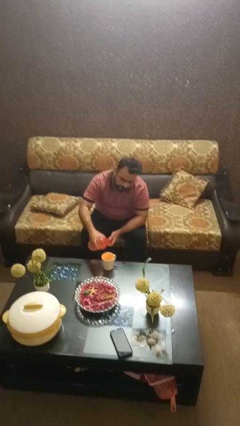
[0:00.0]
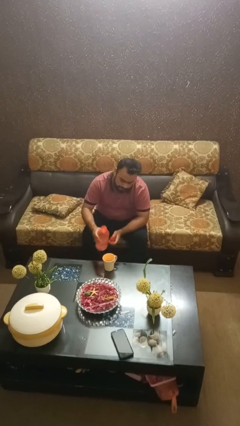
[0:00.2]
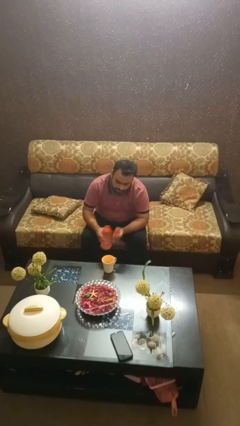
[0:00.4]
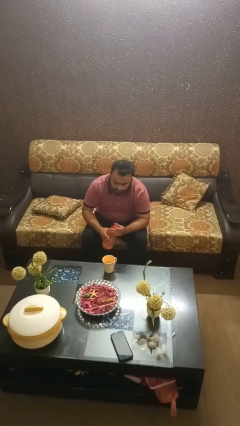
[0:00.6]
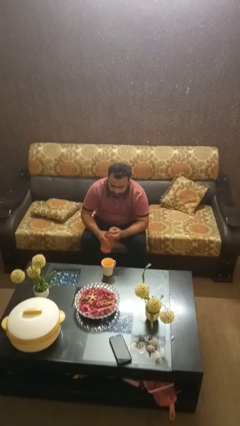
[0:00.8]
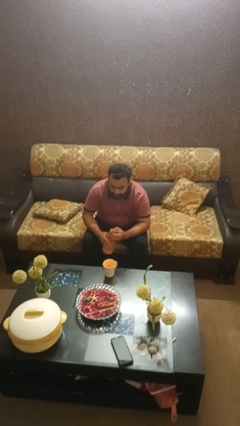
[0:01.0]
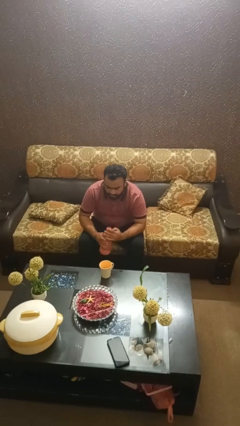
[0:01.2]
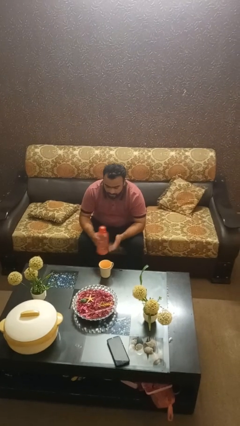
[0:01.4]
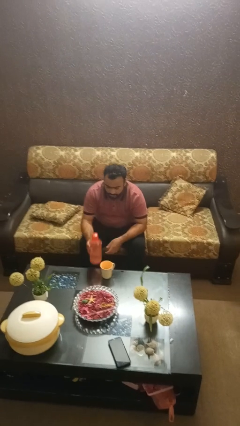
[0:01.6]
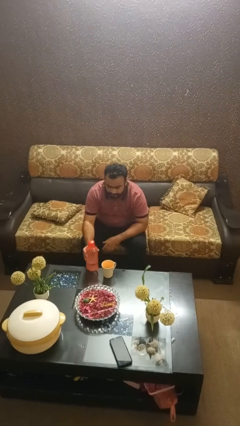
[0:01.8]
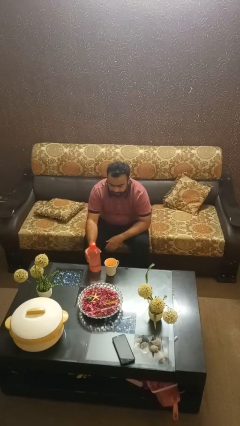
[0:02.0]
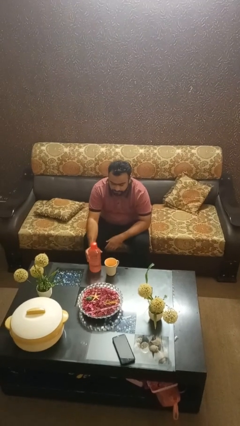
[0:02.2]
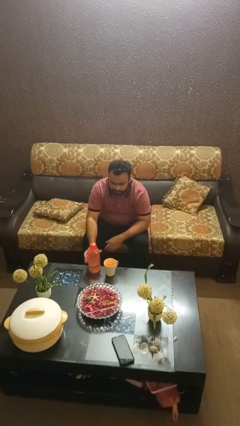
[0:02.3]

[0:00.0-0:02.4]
person screws lid to bottle

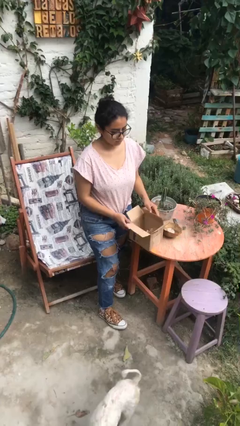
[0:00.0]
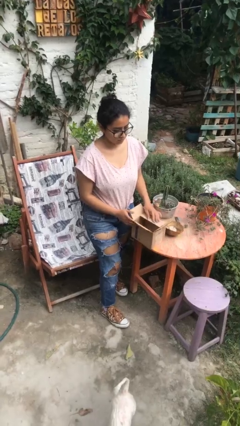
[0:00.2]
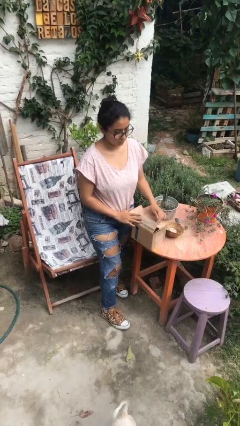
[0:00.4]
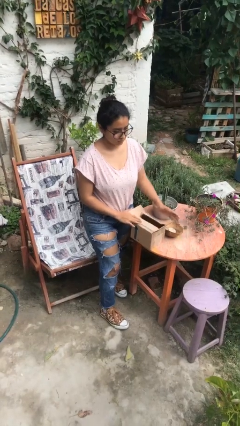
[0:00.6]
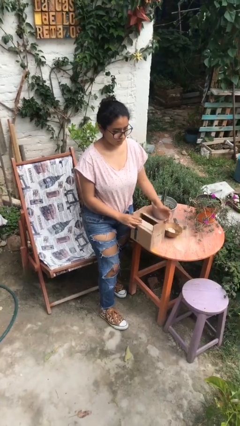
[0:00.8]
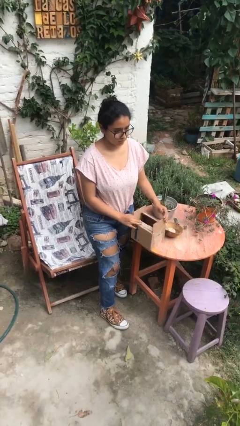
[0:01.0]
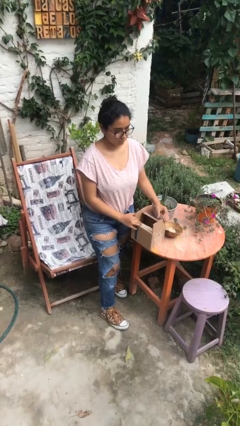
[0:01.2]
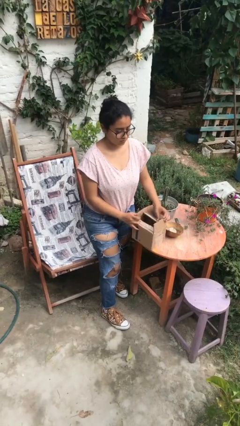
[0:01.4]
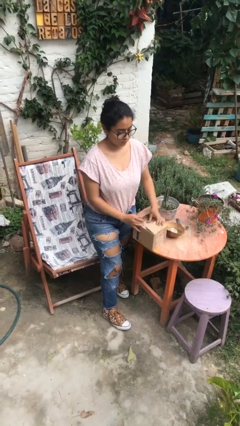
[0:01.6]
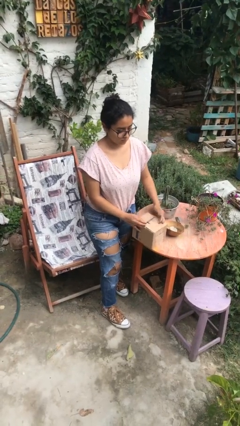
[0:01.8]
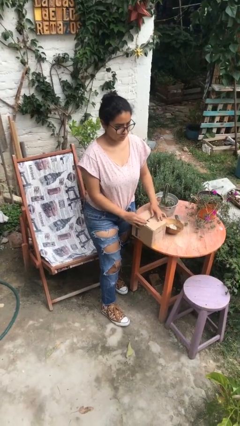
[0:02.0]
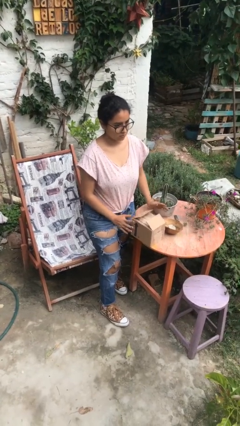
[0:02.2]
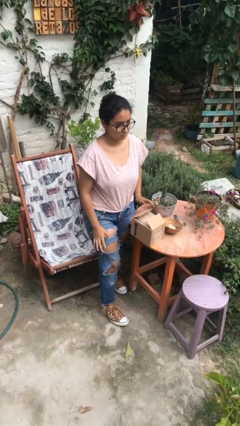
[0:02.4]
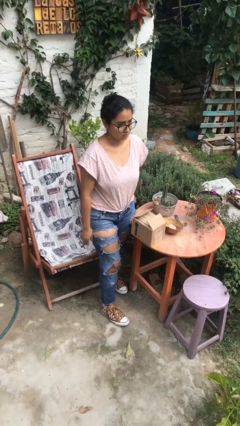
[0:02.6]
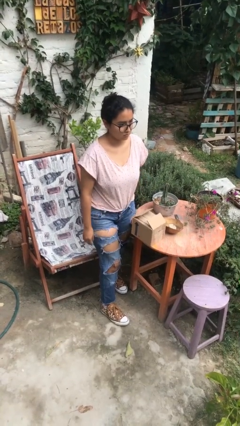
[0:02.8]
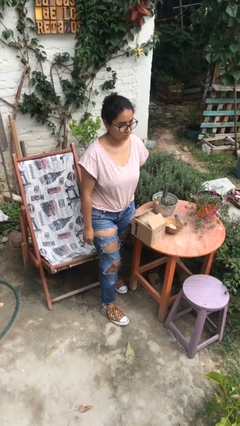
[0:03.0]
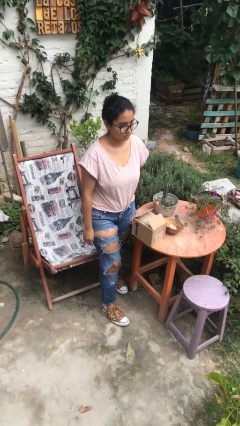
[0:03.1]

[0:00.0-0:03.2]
person closes box

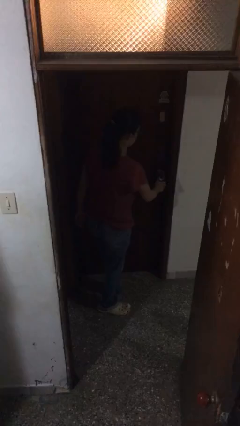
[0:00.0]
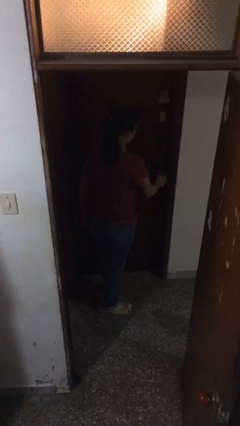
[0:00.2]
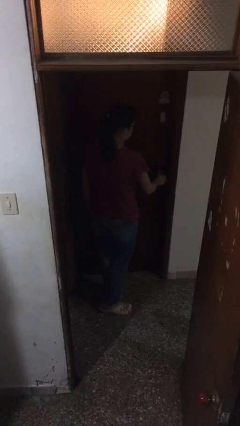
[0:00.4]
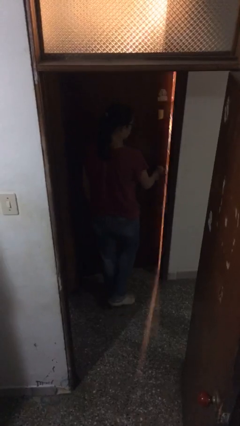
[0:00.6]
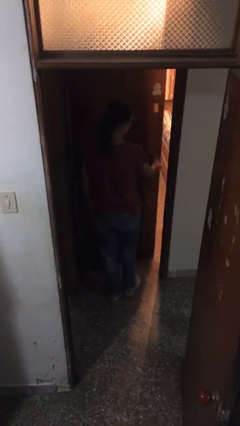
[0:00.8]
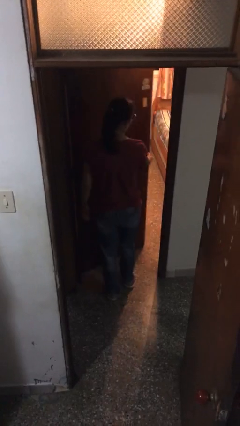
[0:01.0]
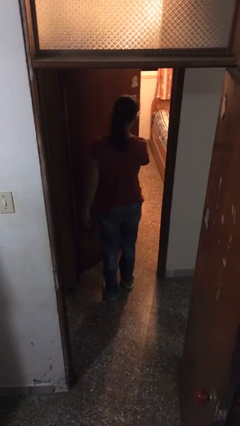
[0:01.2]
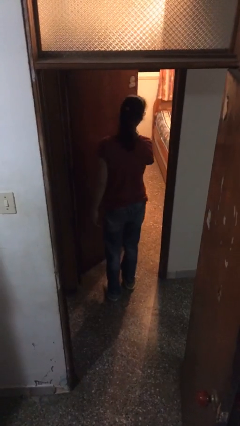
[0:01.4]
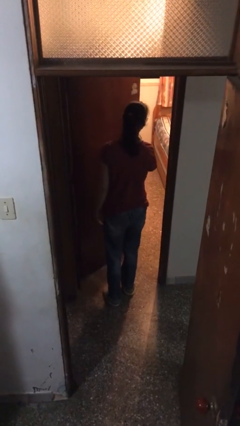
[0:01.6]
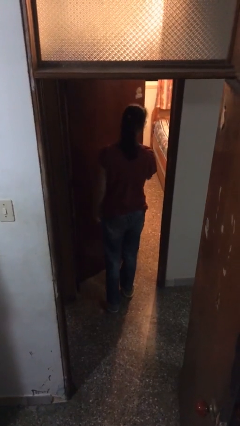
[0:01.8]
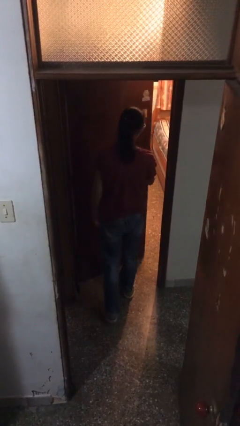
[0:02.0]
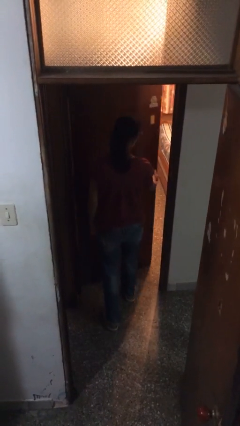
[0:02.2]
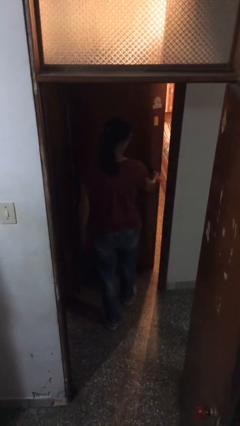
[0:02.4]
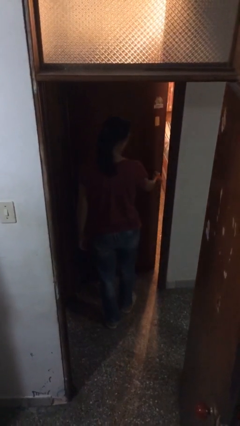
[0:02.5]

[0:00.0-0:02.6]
person opens facility door

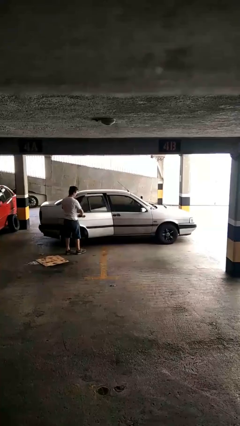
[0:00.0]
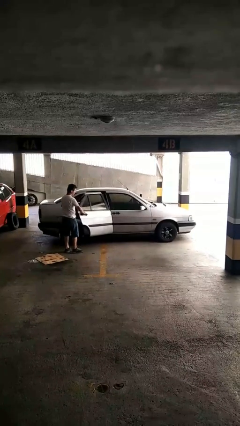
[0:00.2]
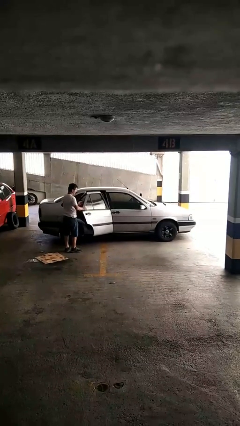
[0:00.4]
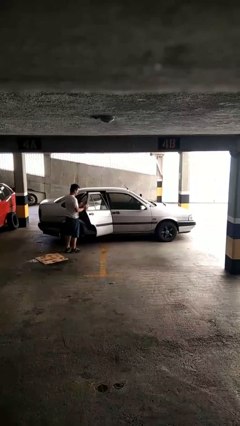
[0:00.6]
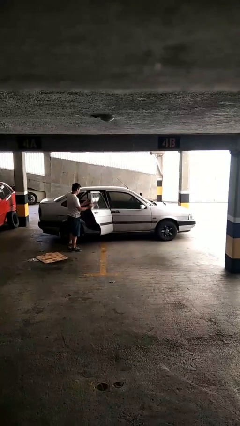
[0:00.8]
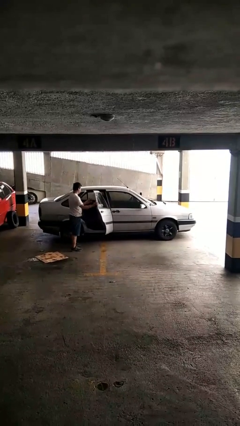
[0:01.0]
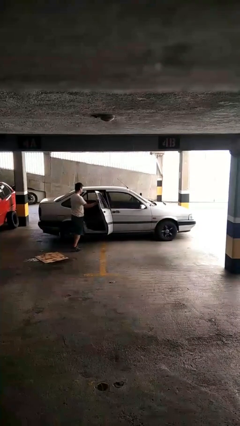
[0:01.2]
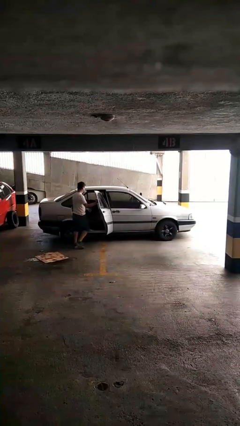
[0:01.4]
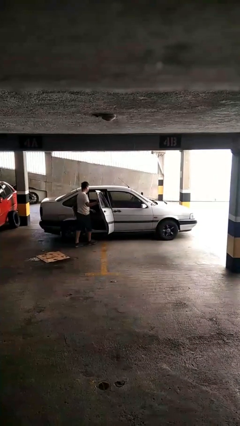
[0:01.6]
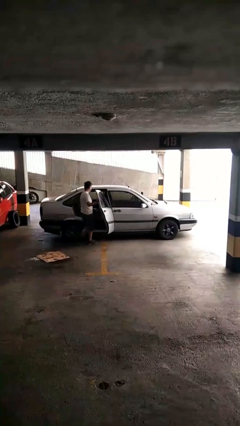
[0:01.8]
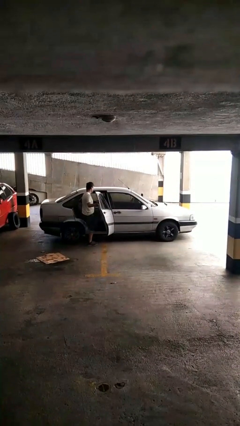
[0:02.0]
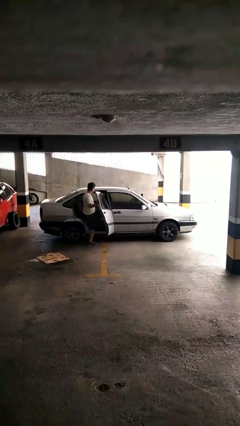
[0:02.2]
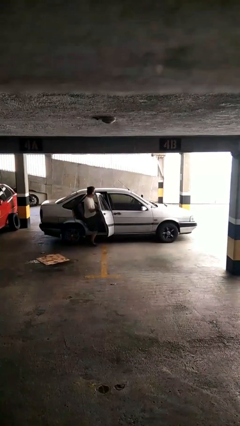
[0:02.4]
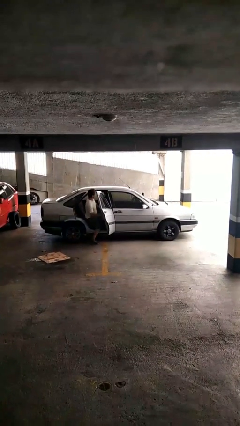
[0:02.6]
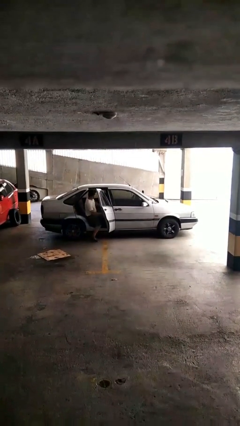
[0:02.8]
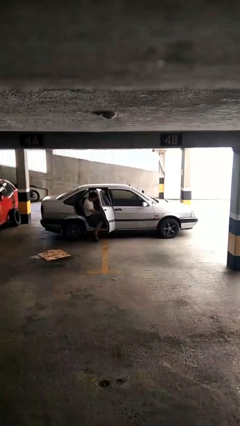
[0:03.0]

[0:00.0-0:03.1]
car picks up person

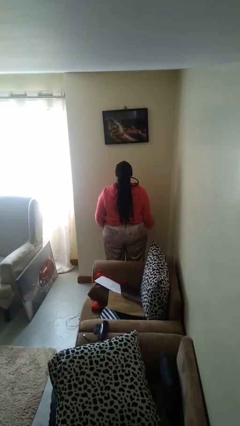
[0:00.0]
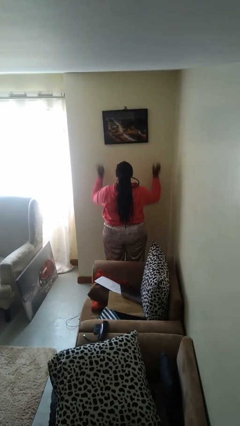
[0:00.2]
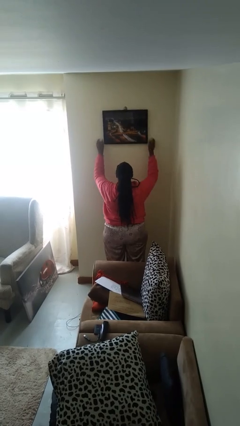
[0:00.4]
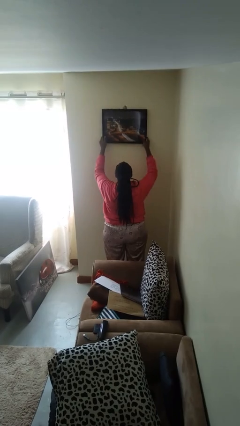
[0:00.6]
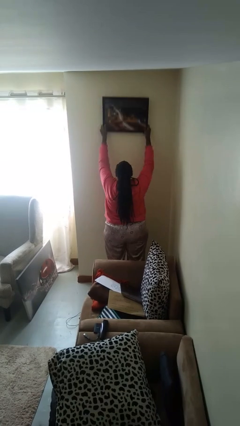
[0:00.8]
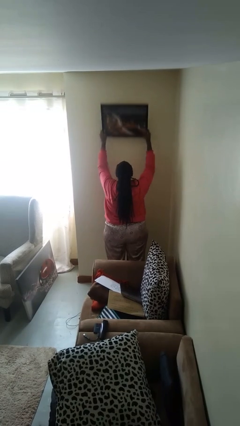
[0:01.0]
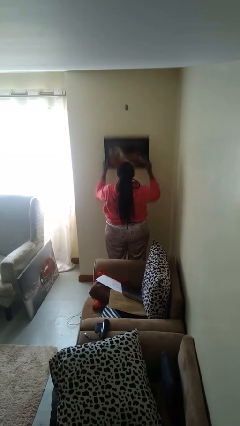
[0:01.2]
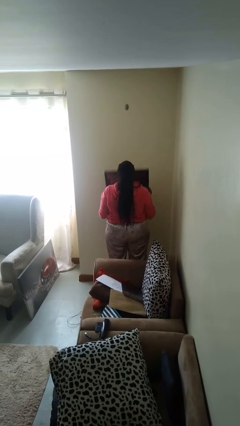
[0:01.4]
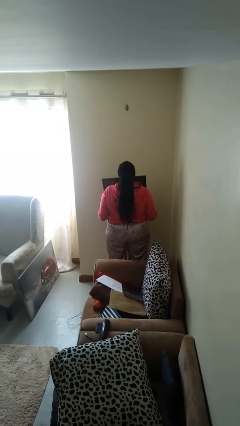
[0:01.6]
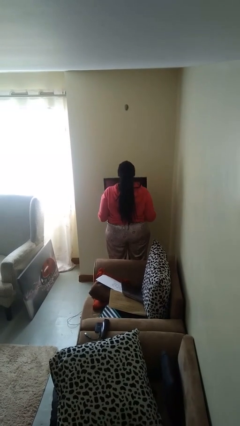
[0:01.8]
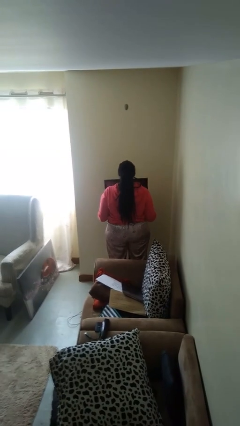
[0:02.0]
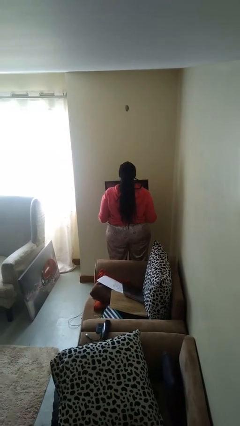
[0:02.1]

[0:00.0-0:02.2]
person takes down picture frame

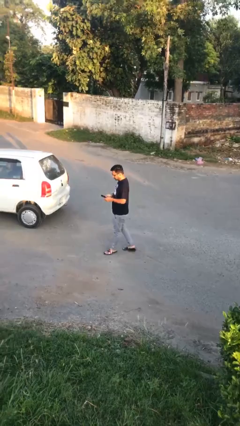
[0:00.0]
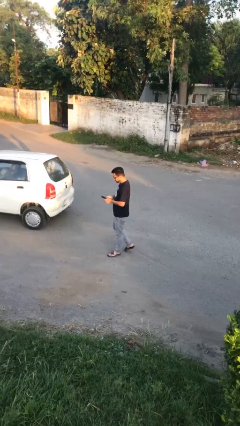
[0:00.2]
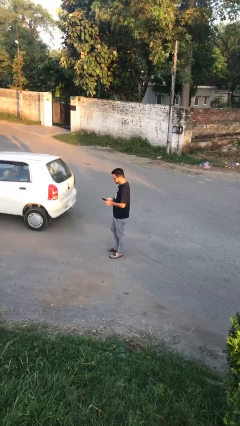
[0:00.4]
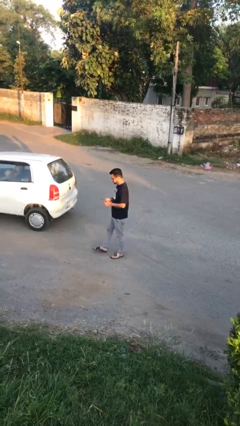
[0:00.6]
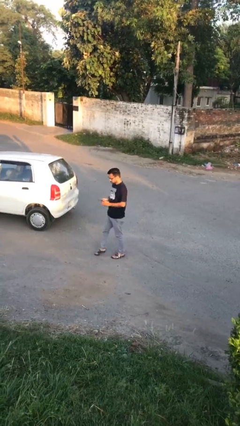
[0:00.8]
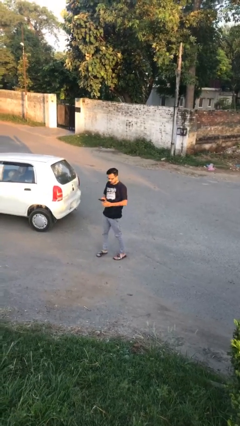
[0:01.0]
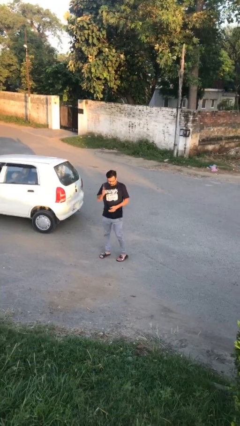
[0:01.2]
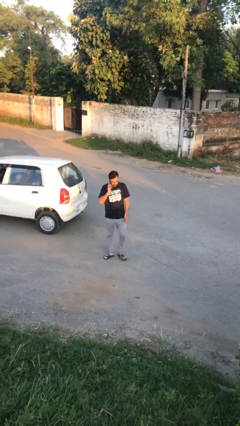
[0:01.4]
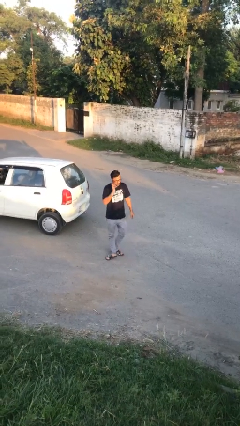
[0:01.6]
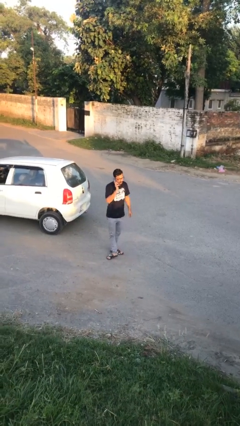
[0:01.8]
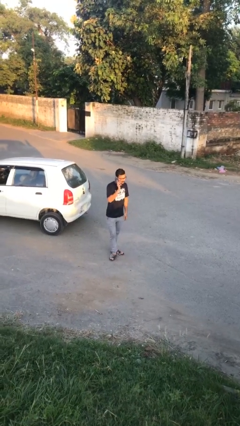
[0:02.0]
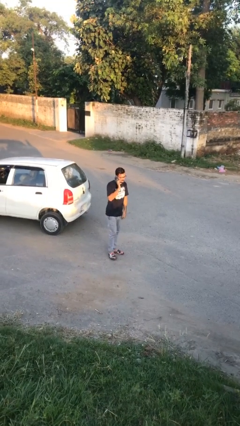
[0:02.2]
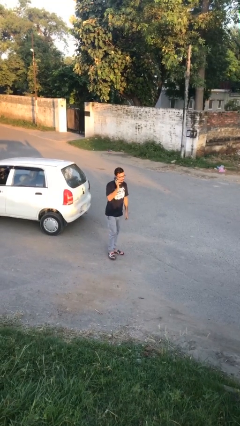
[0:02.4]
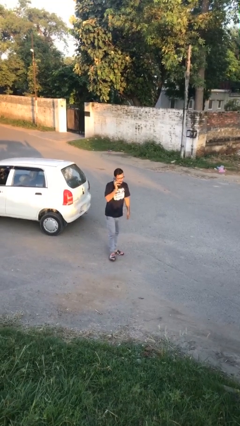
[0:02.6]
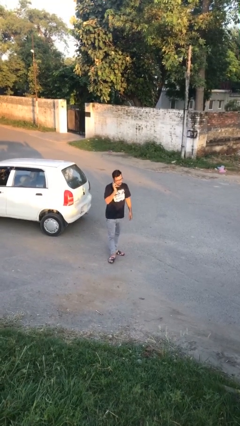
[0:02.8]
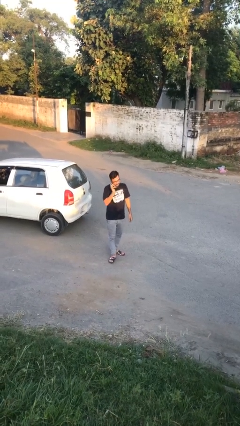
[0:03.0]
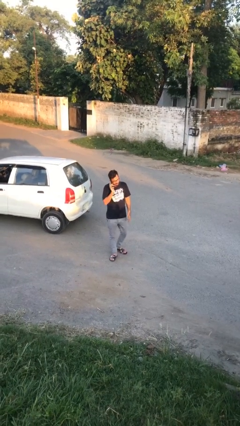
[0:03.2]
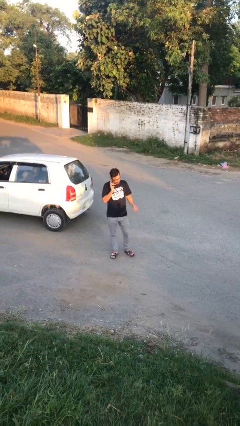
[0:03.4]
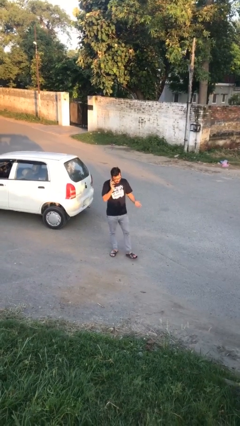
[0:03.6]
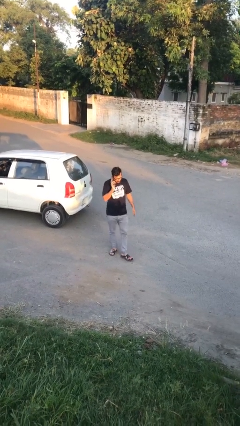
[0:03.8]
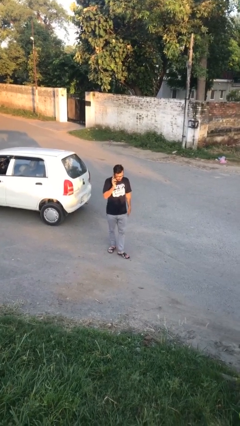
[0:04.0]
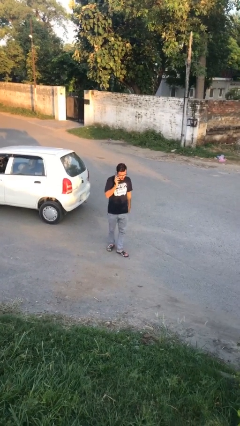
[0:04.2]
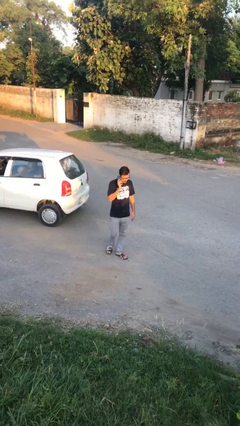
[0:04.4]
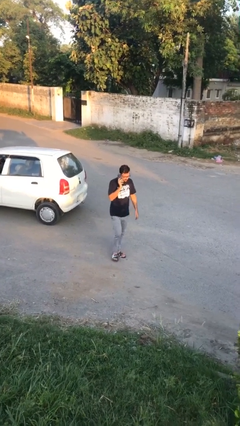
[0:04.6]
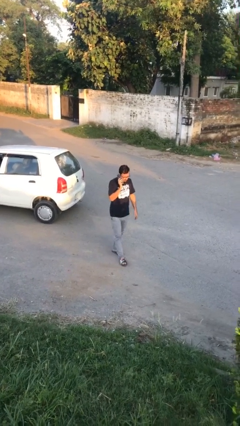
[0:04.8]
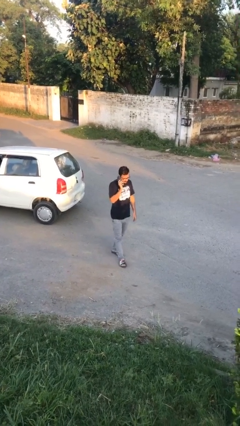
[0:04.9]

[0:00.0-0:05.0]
person talks on phone
